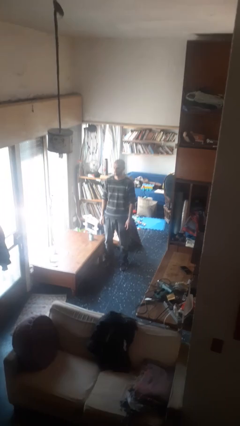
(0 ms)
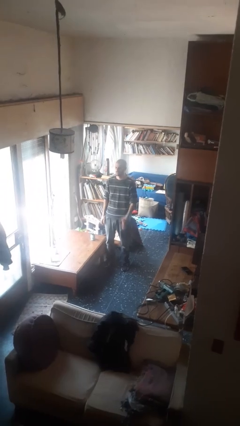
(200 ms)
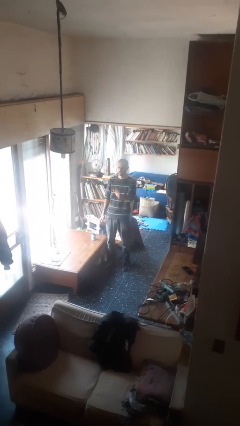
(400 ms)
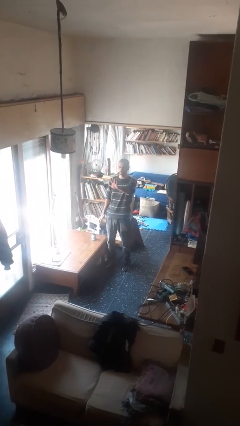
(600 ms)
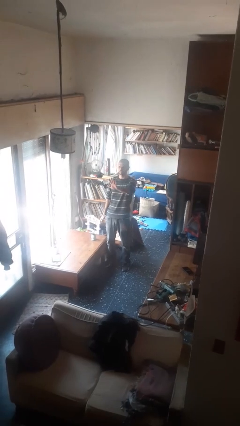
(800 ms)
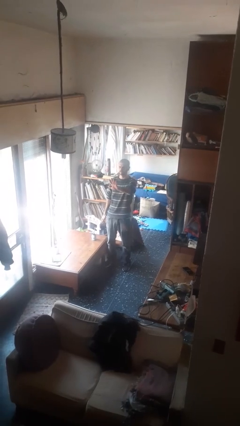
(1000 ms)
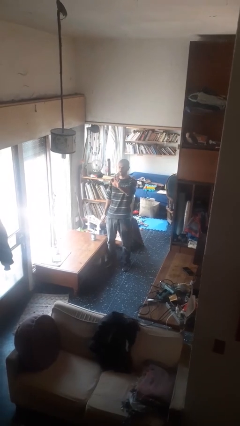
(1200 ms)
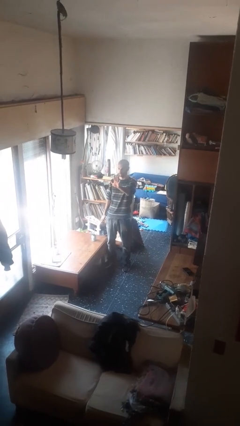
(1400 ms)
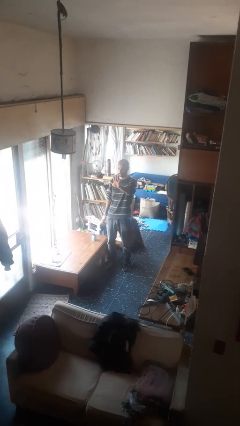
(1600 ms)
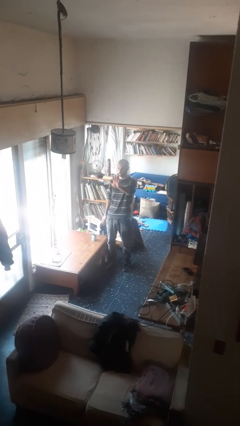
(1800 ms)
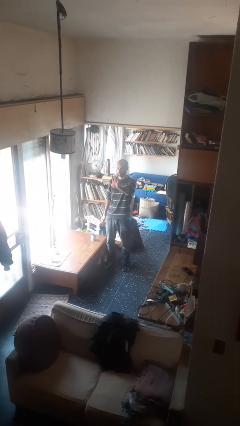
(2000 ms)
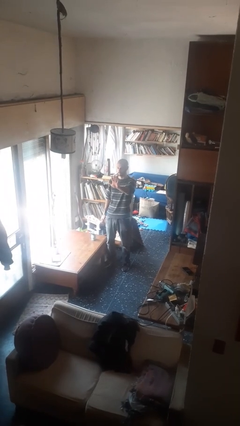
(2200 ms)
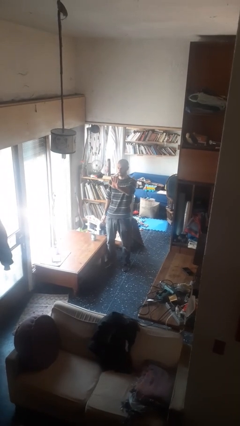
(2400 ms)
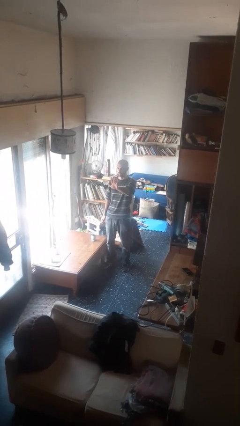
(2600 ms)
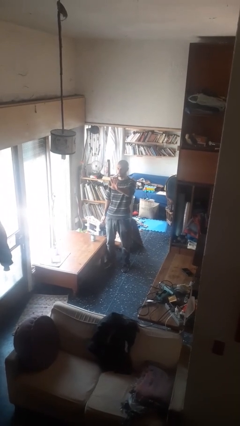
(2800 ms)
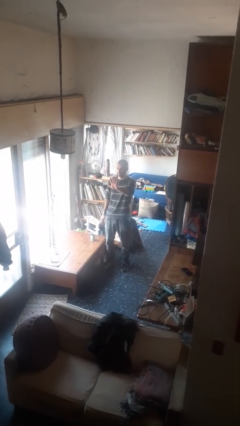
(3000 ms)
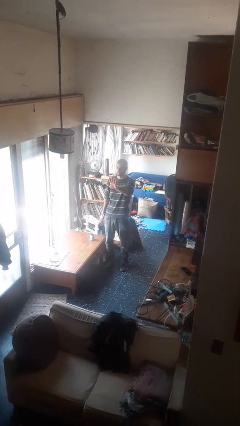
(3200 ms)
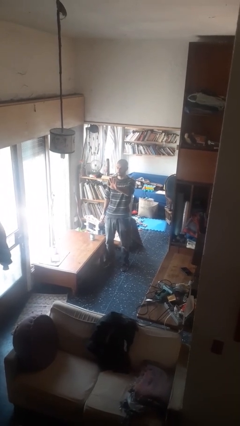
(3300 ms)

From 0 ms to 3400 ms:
person gestures number five

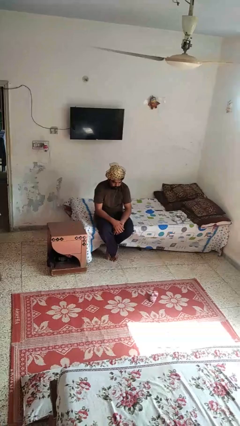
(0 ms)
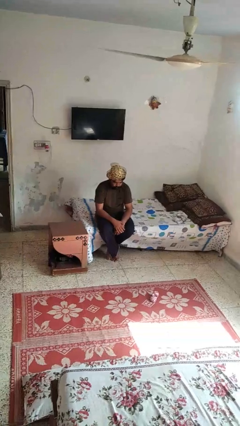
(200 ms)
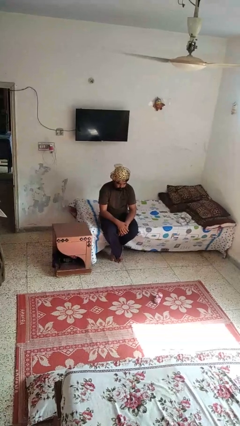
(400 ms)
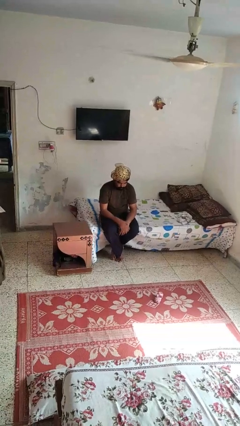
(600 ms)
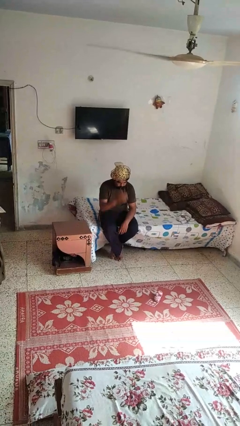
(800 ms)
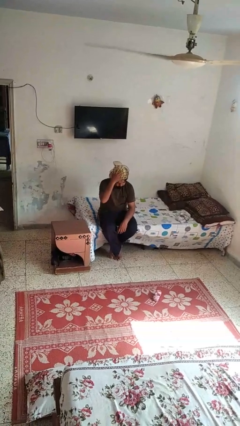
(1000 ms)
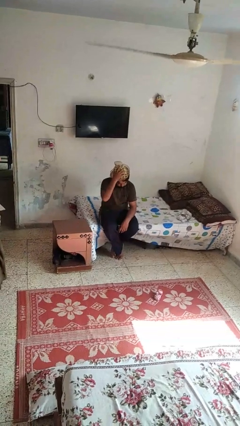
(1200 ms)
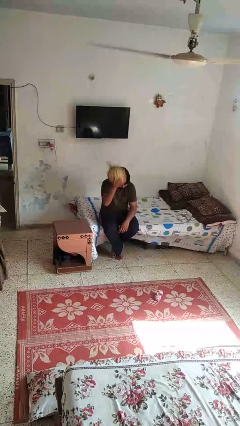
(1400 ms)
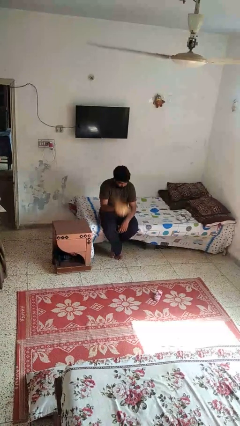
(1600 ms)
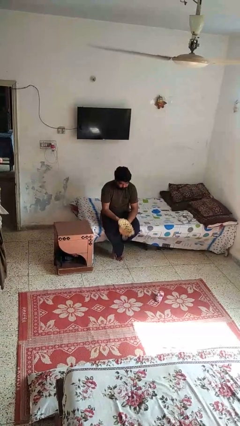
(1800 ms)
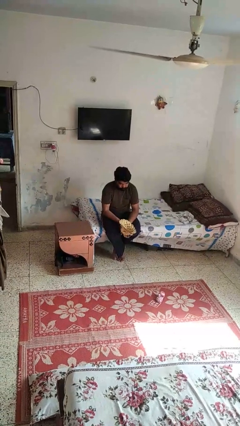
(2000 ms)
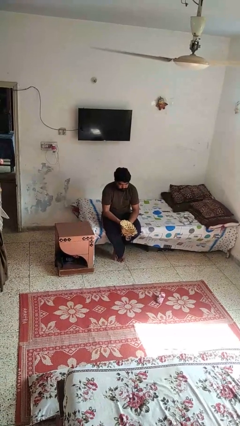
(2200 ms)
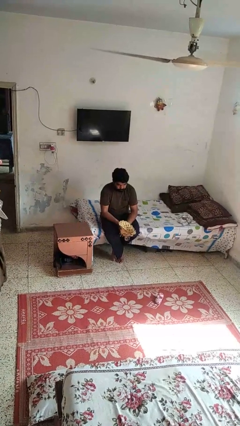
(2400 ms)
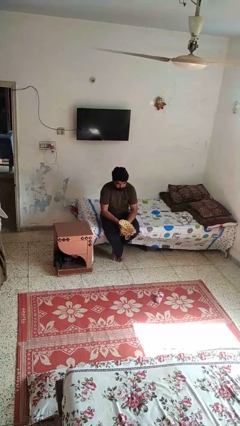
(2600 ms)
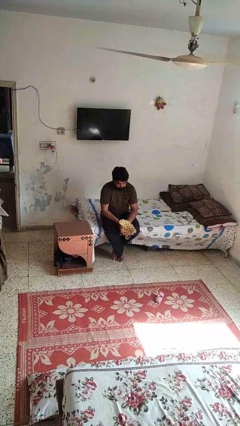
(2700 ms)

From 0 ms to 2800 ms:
person takes off hat

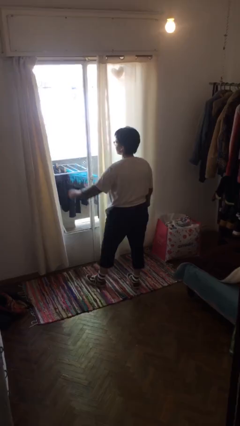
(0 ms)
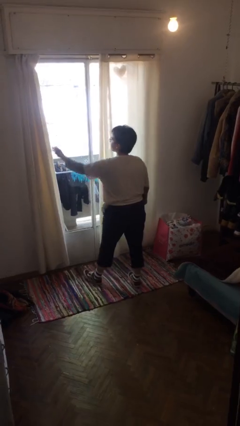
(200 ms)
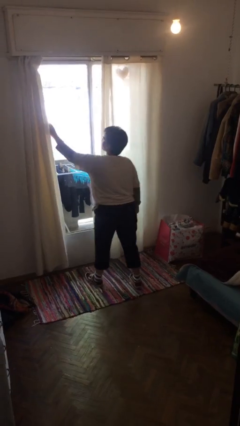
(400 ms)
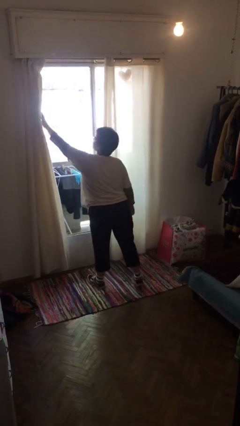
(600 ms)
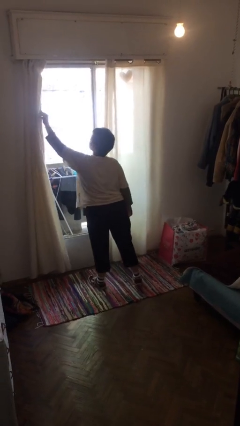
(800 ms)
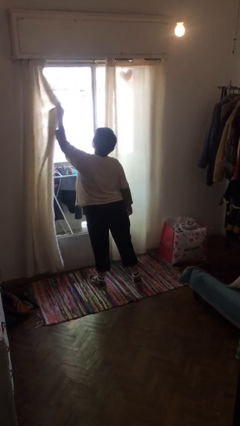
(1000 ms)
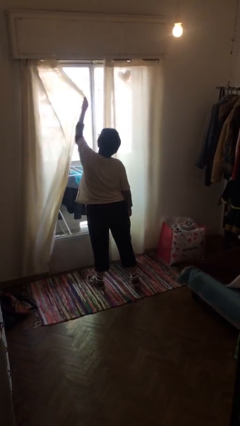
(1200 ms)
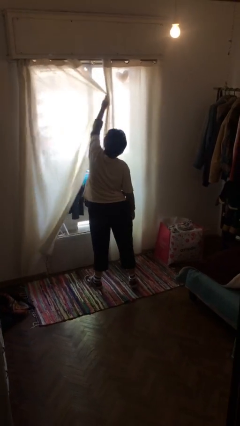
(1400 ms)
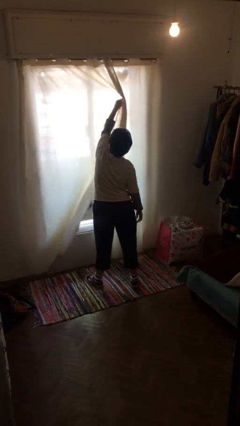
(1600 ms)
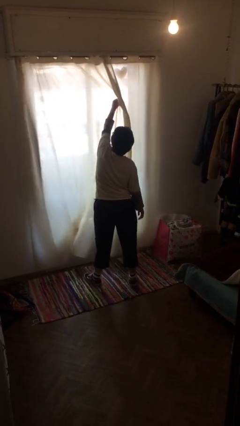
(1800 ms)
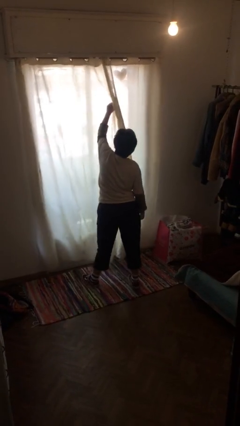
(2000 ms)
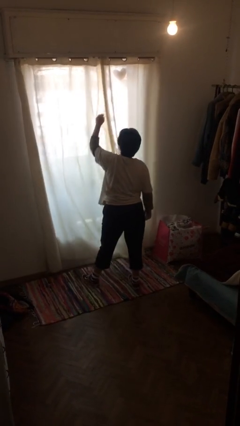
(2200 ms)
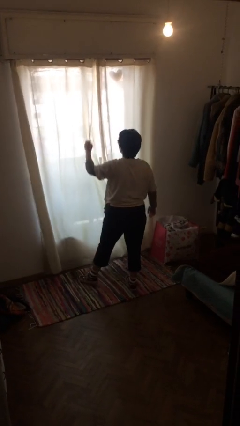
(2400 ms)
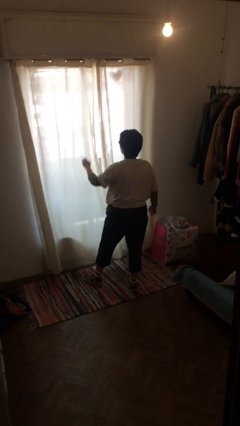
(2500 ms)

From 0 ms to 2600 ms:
person closes curtains

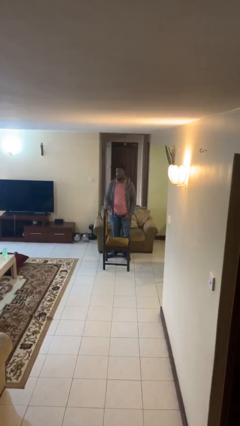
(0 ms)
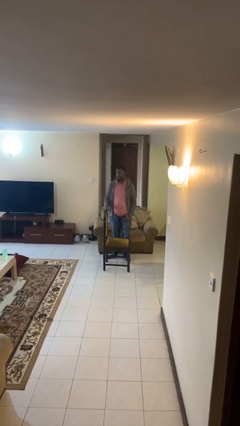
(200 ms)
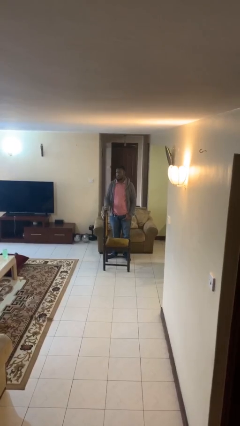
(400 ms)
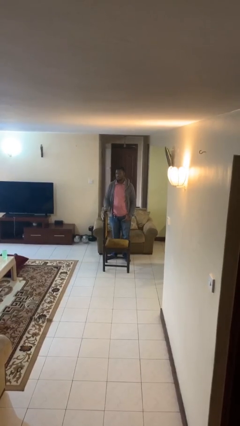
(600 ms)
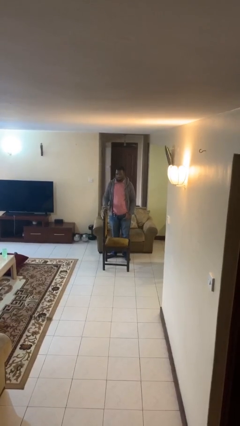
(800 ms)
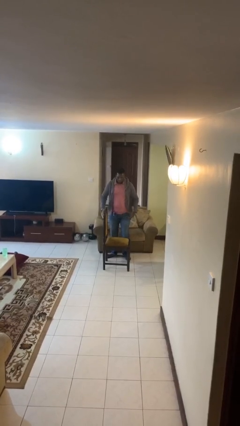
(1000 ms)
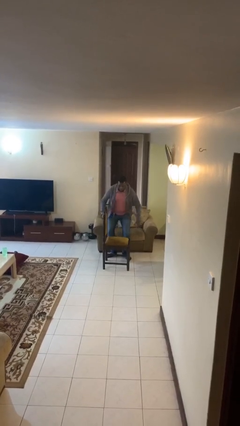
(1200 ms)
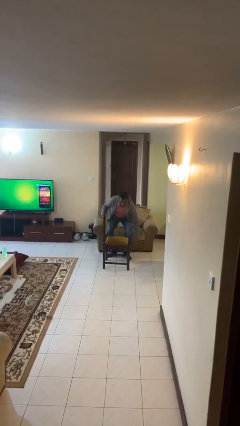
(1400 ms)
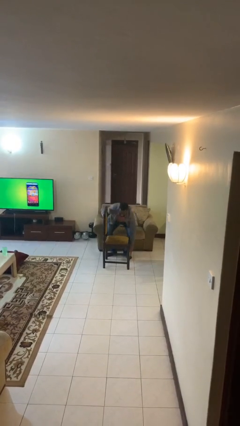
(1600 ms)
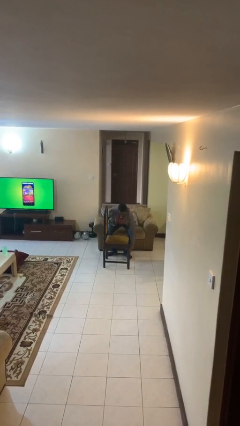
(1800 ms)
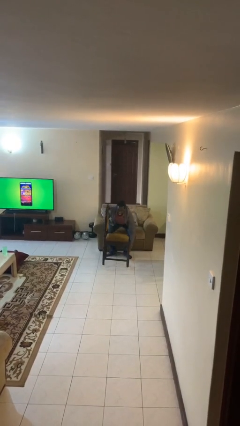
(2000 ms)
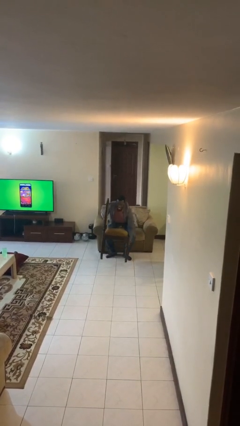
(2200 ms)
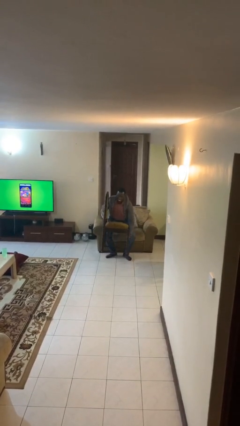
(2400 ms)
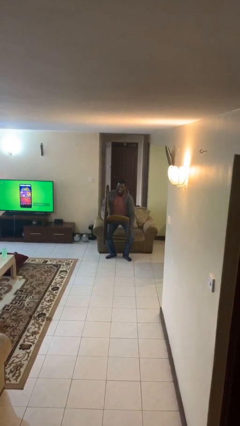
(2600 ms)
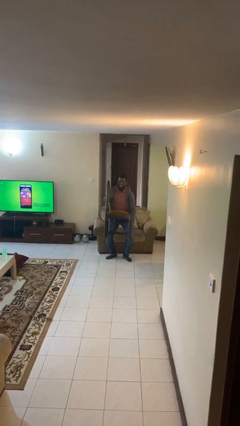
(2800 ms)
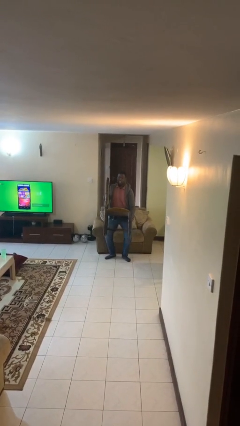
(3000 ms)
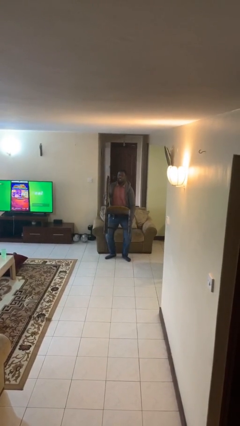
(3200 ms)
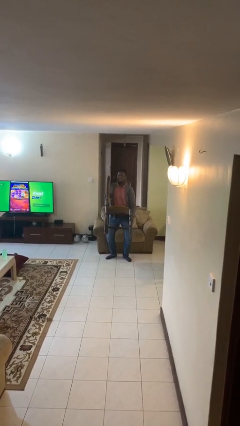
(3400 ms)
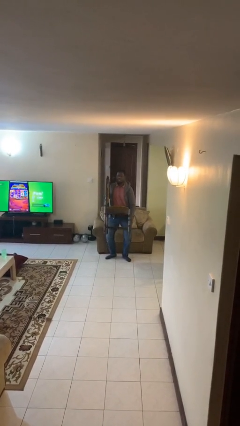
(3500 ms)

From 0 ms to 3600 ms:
person picks up object from floor

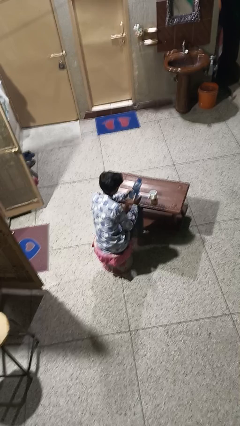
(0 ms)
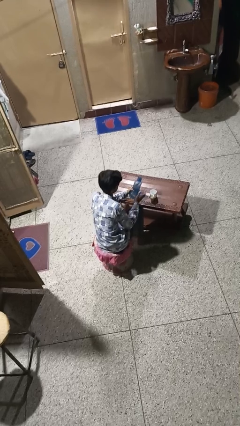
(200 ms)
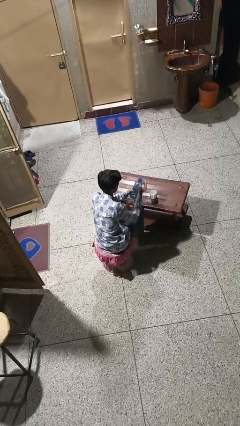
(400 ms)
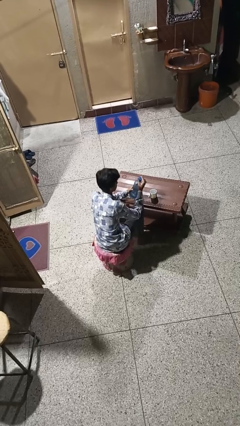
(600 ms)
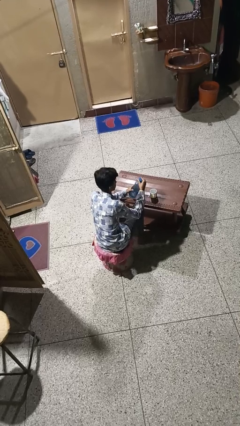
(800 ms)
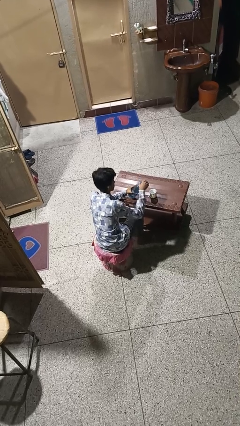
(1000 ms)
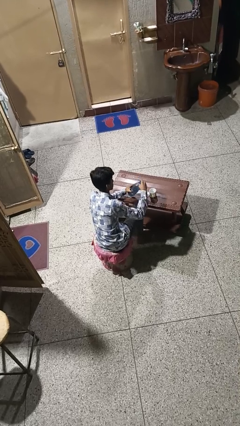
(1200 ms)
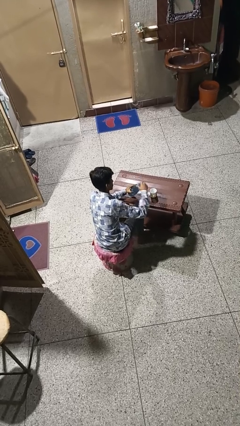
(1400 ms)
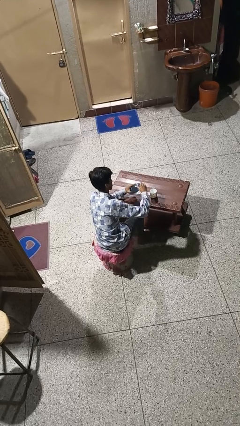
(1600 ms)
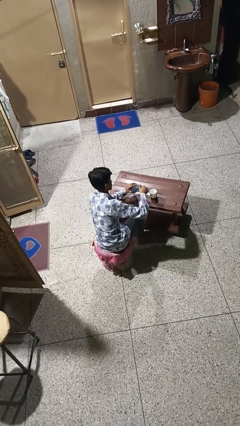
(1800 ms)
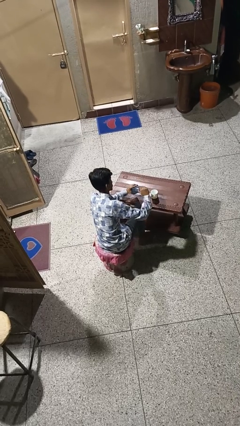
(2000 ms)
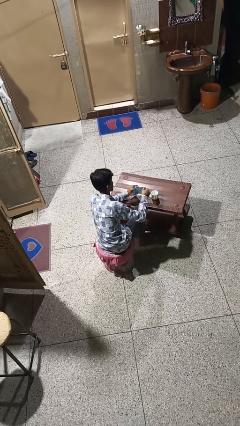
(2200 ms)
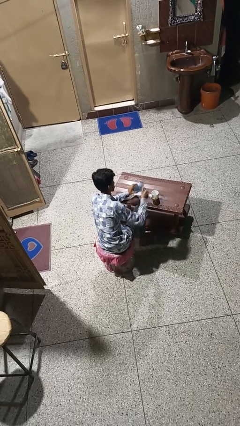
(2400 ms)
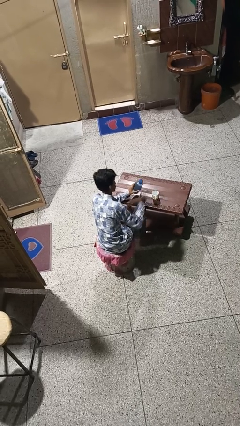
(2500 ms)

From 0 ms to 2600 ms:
person screws lid to bottle

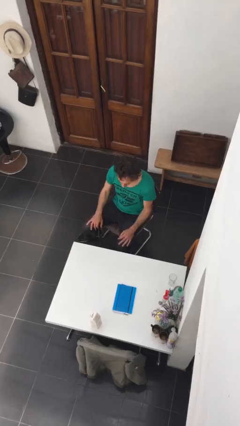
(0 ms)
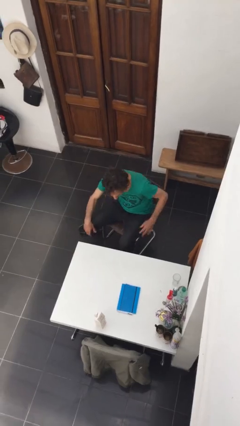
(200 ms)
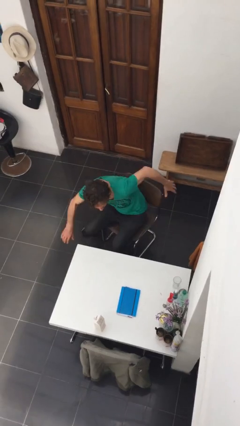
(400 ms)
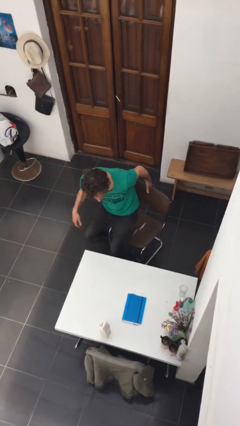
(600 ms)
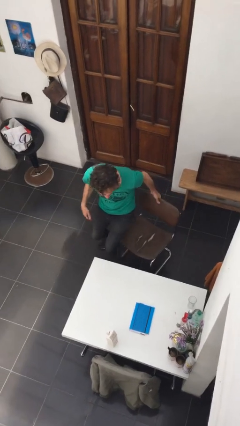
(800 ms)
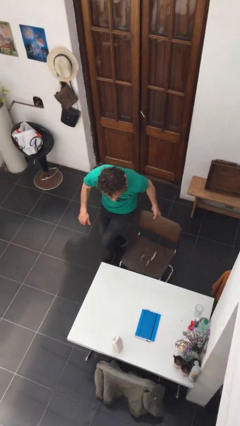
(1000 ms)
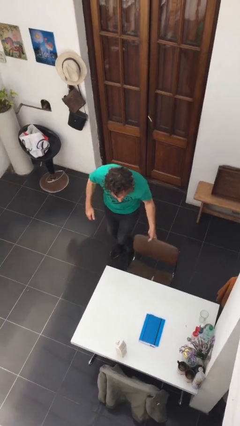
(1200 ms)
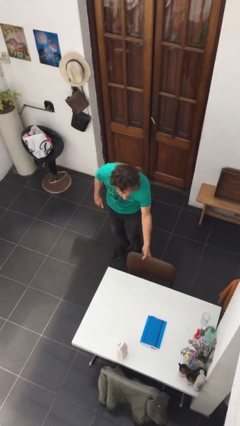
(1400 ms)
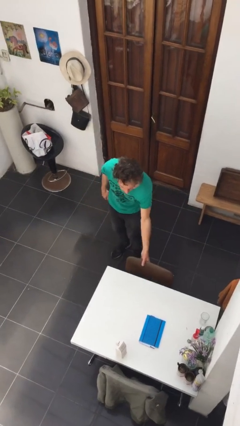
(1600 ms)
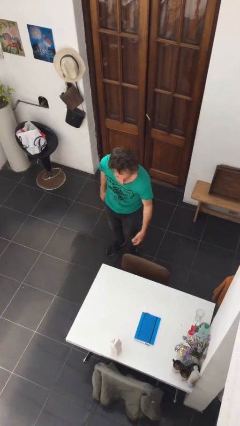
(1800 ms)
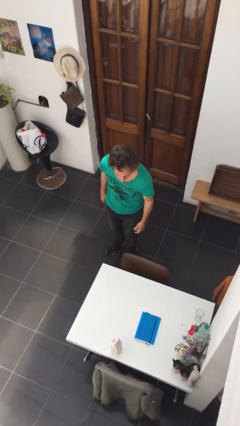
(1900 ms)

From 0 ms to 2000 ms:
person stands up

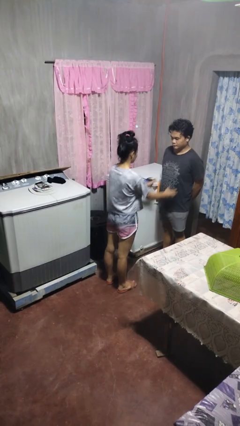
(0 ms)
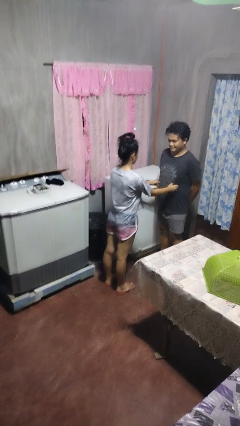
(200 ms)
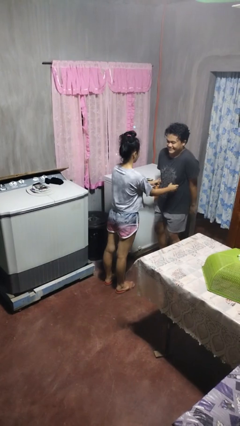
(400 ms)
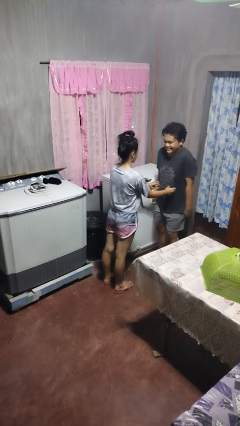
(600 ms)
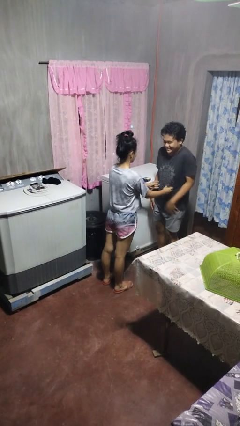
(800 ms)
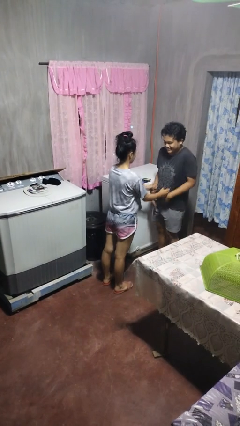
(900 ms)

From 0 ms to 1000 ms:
person tickles person
